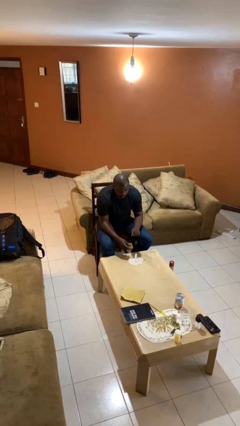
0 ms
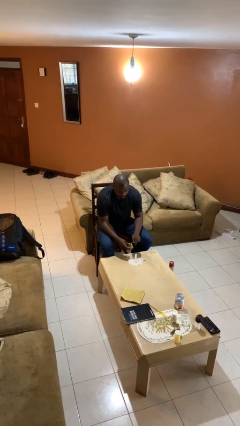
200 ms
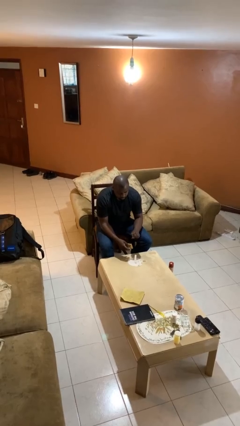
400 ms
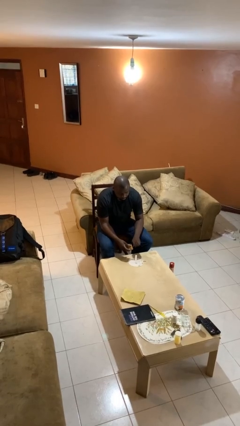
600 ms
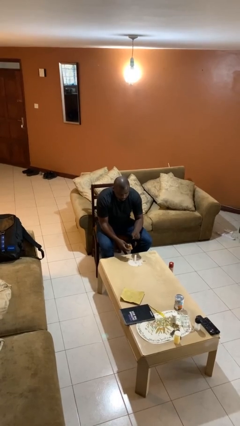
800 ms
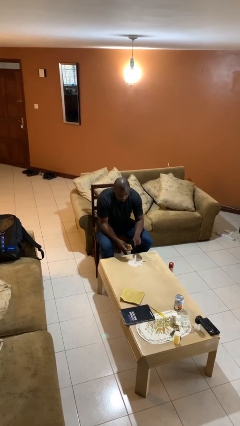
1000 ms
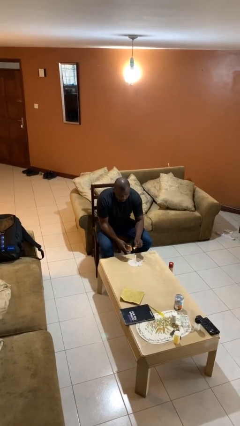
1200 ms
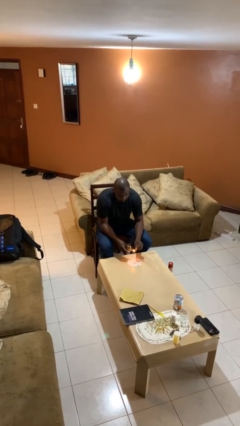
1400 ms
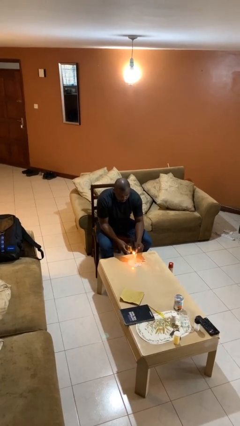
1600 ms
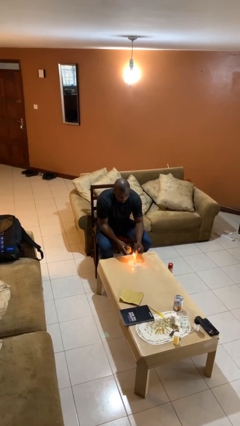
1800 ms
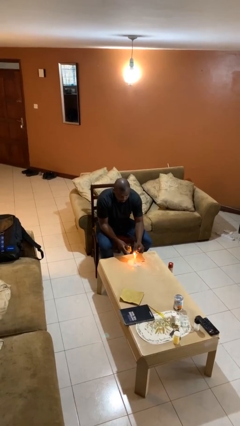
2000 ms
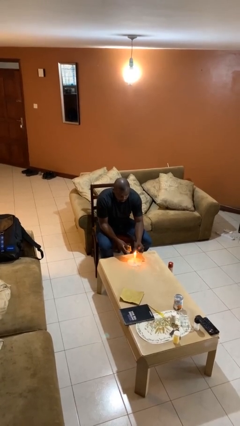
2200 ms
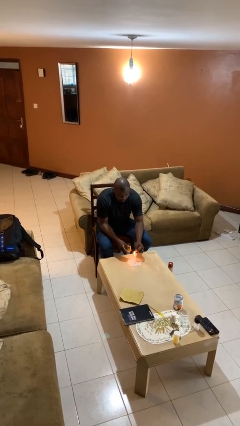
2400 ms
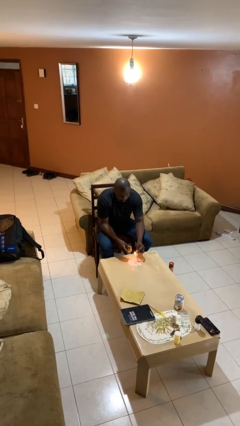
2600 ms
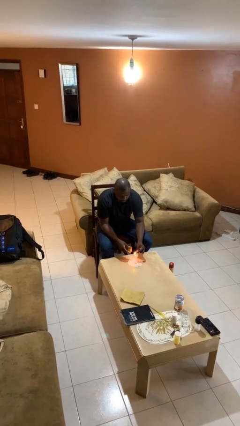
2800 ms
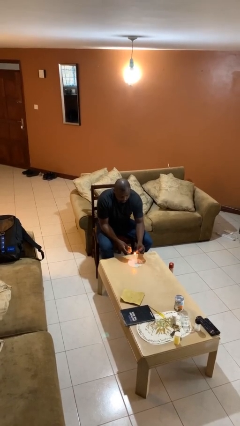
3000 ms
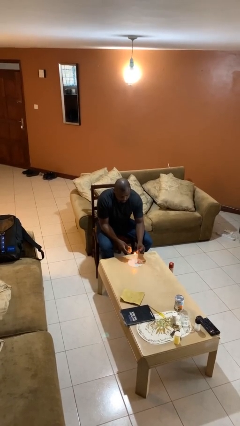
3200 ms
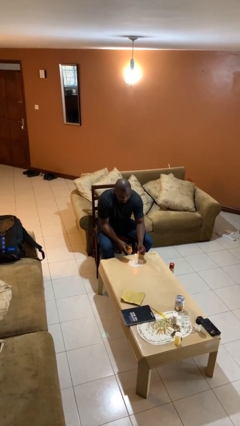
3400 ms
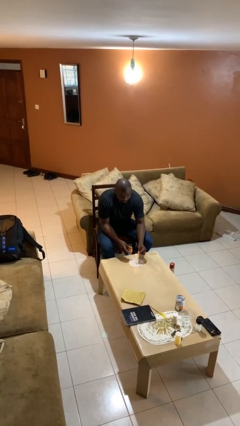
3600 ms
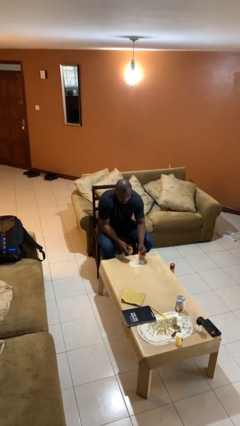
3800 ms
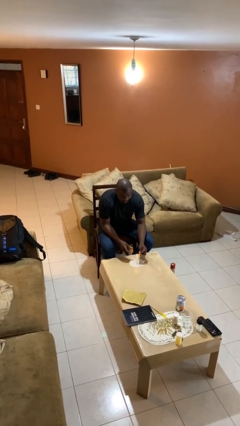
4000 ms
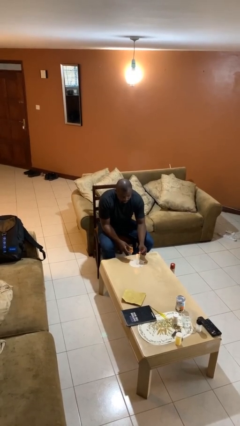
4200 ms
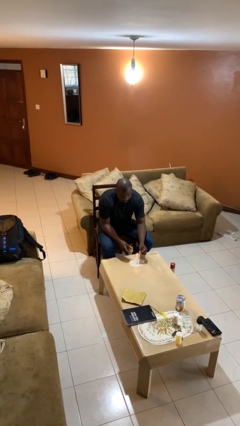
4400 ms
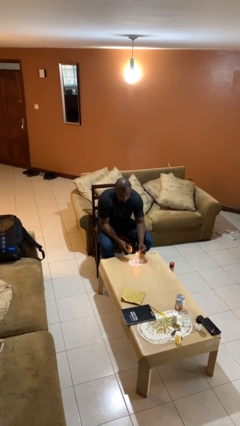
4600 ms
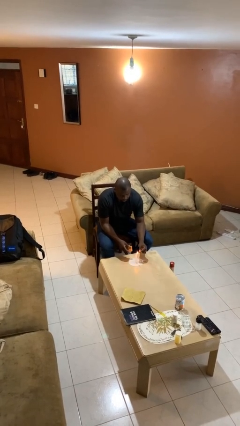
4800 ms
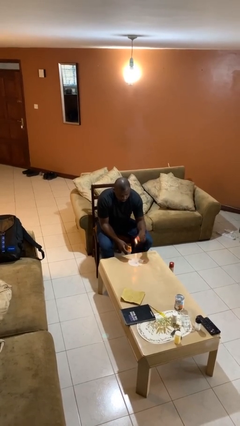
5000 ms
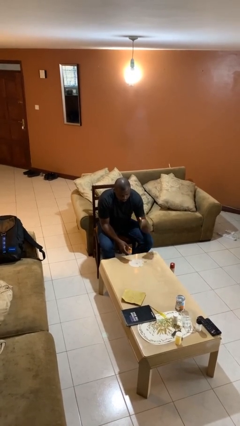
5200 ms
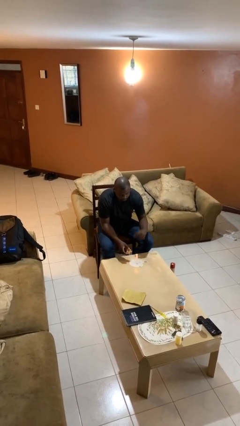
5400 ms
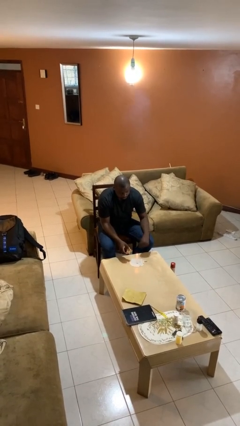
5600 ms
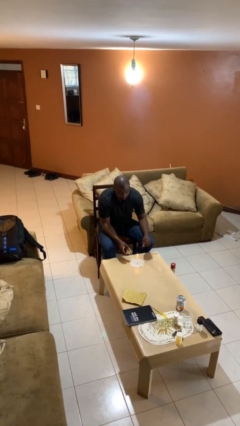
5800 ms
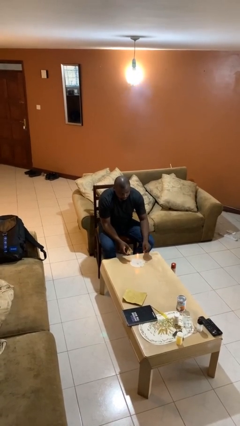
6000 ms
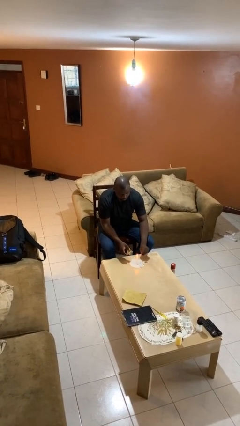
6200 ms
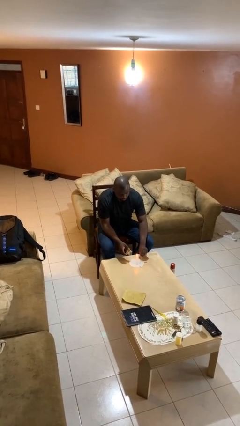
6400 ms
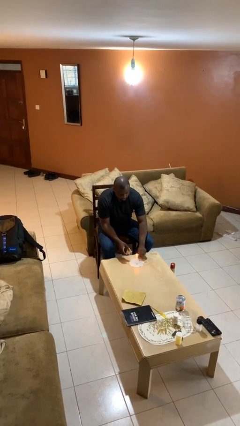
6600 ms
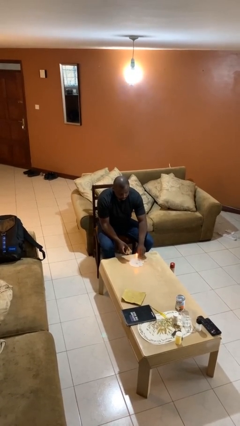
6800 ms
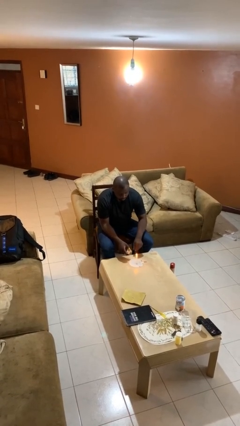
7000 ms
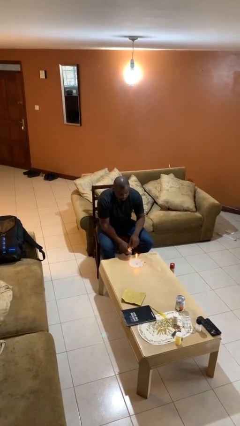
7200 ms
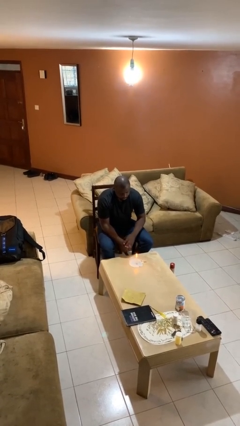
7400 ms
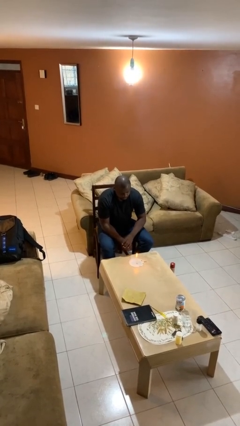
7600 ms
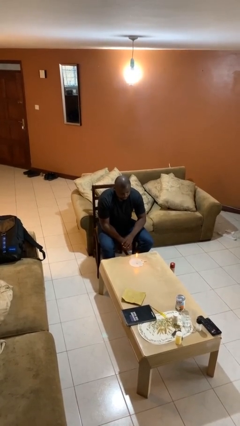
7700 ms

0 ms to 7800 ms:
person lights candle

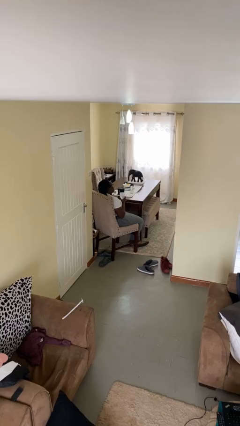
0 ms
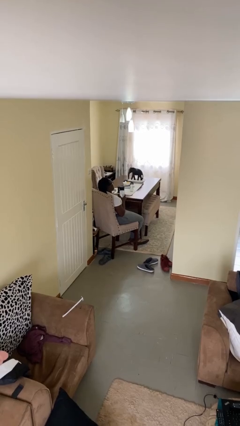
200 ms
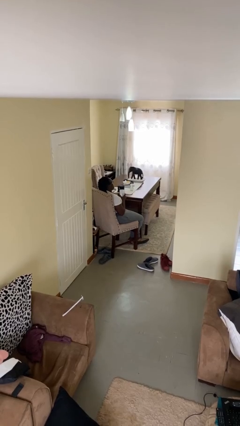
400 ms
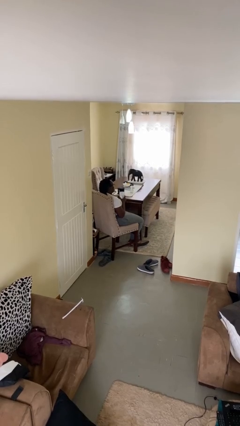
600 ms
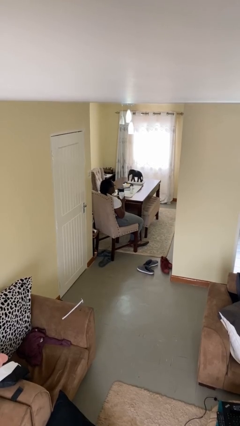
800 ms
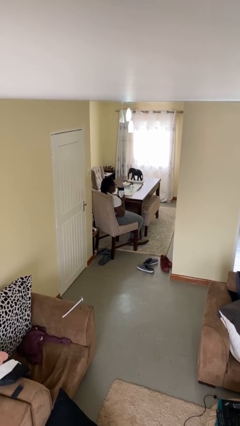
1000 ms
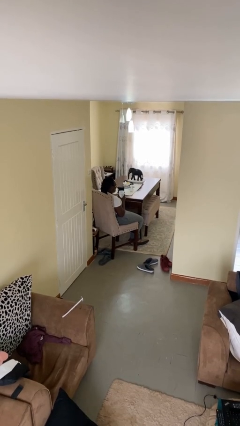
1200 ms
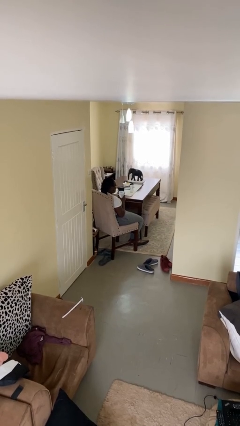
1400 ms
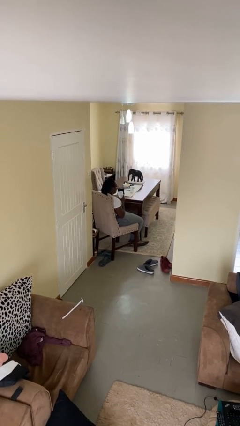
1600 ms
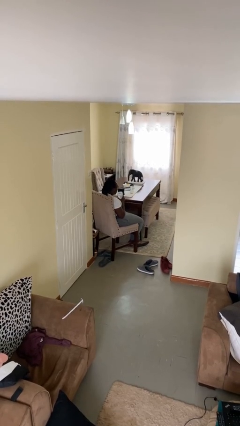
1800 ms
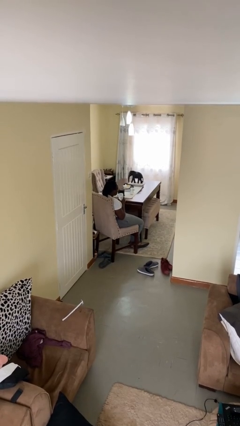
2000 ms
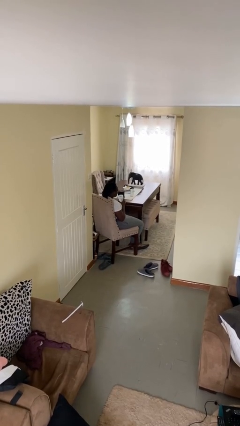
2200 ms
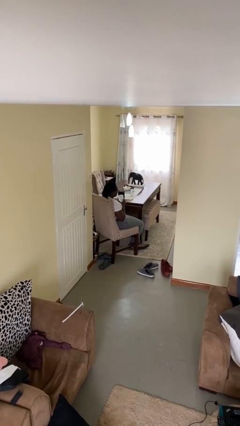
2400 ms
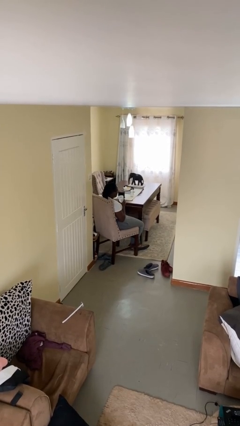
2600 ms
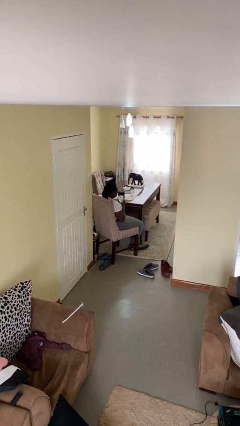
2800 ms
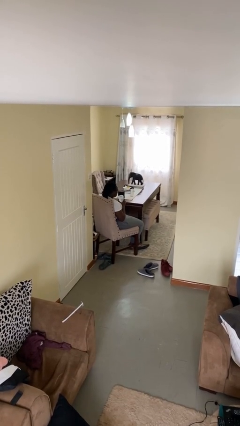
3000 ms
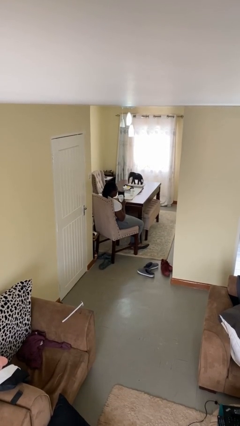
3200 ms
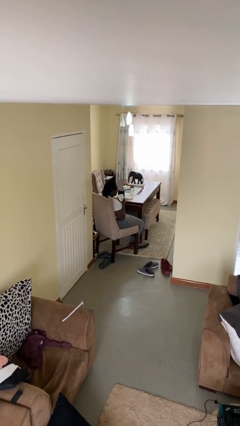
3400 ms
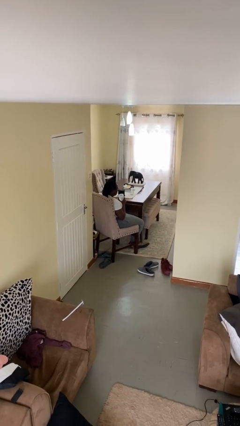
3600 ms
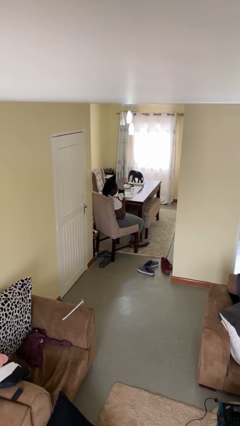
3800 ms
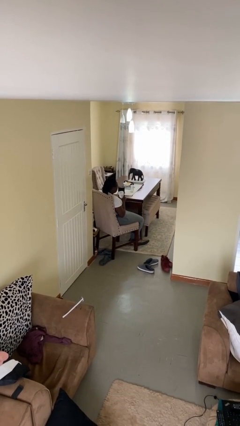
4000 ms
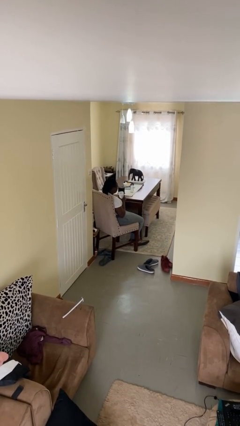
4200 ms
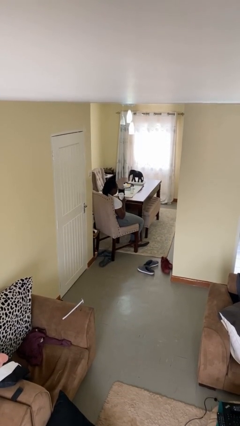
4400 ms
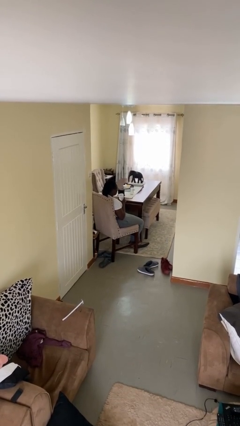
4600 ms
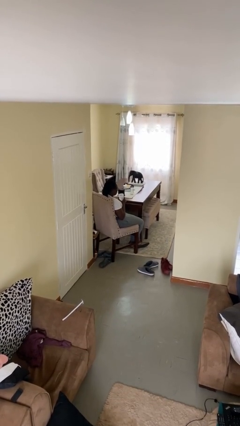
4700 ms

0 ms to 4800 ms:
person drinks from straw

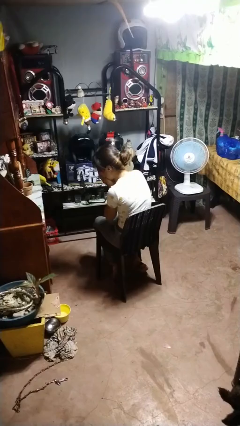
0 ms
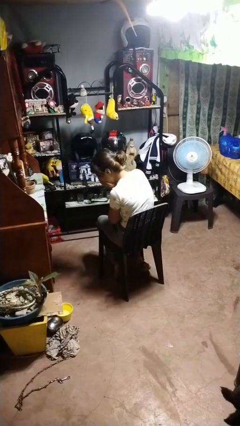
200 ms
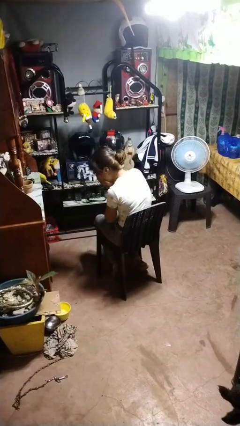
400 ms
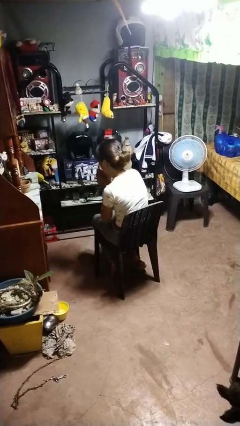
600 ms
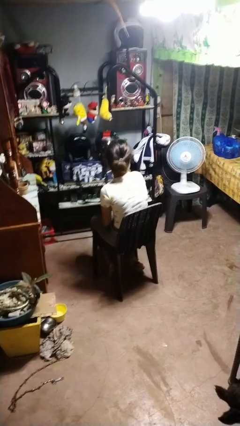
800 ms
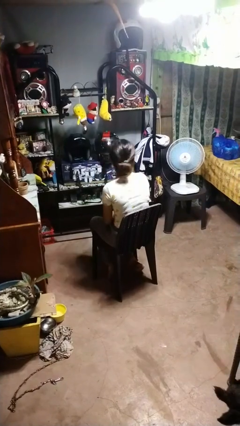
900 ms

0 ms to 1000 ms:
person sneezes into hand

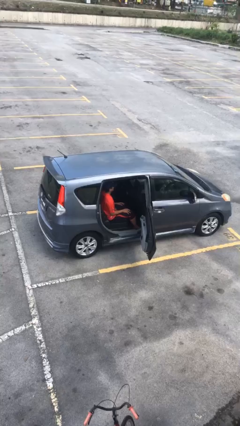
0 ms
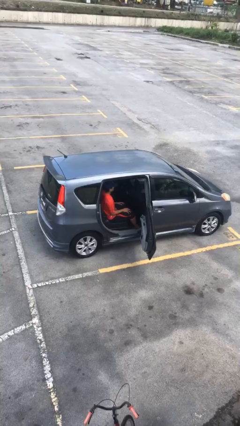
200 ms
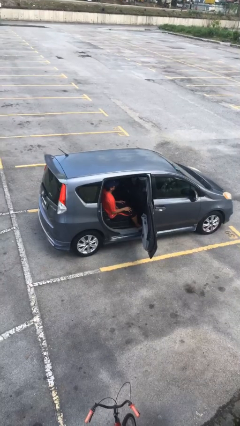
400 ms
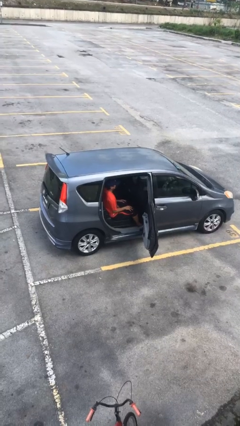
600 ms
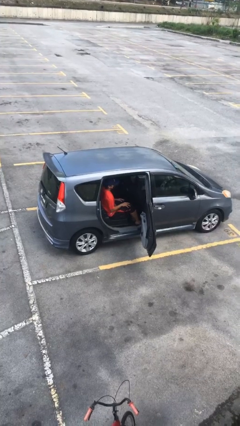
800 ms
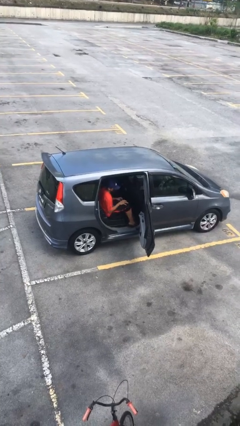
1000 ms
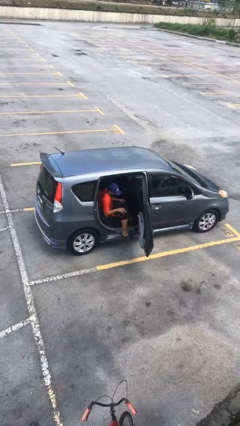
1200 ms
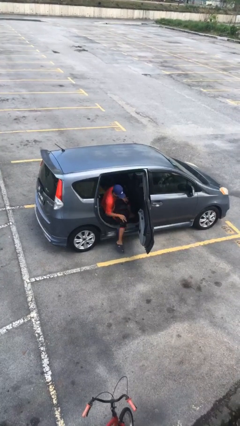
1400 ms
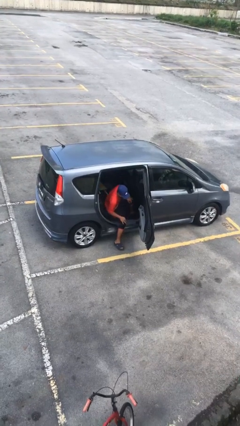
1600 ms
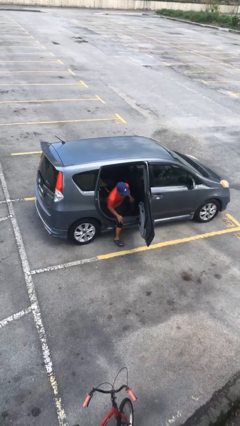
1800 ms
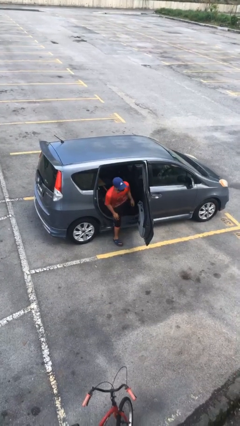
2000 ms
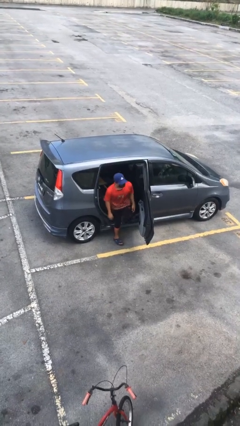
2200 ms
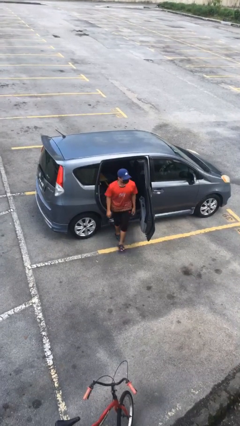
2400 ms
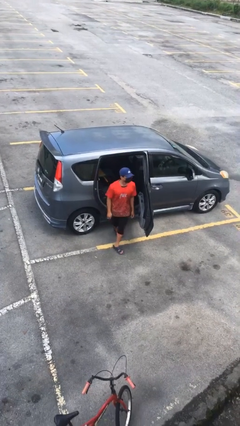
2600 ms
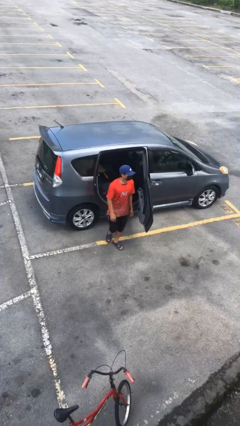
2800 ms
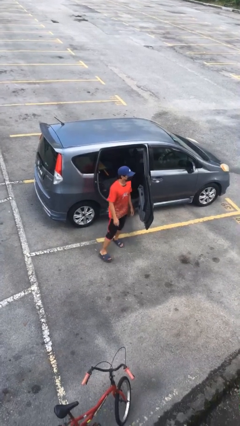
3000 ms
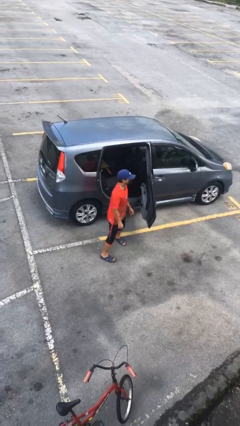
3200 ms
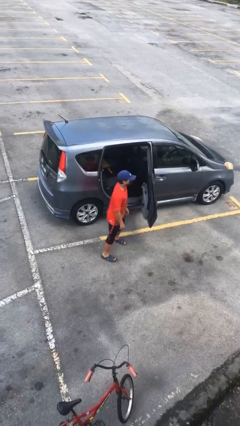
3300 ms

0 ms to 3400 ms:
person exits car

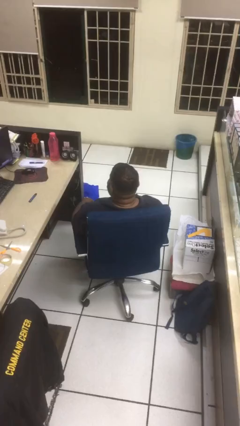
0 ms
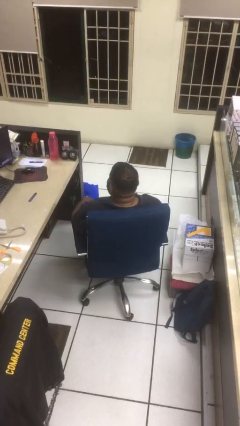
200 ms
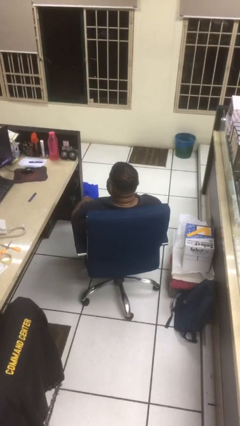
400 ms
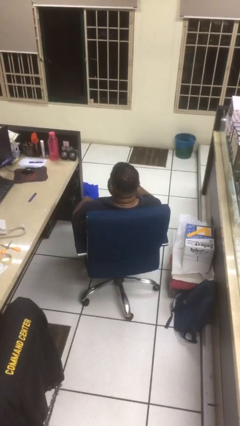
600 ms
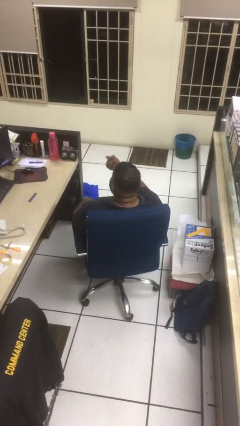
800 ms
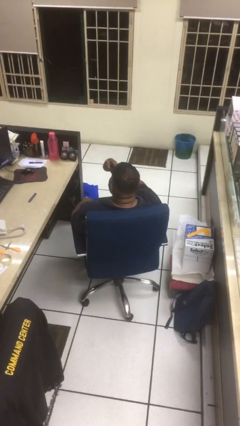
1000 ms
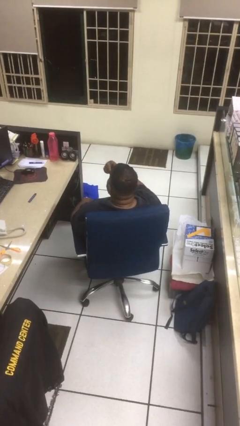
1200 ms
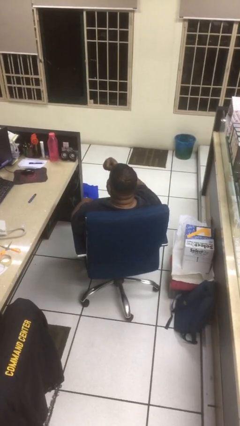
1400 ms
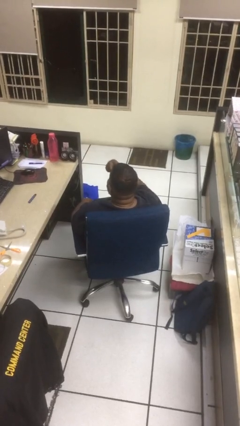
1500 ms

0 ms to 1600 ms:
person gestures watch closely
